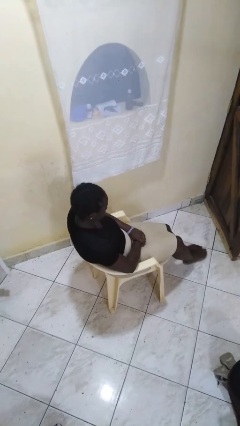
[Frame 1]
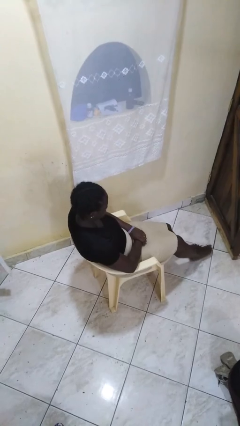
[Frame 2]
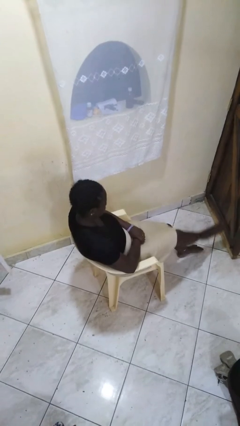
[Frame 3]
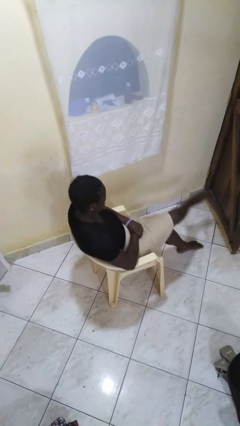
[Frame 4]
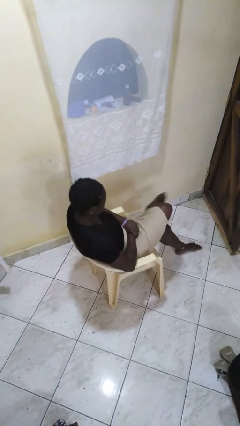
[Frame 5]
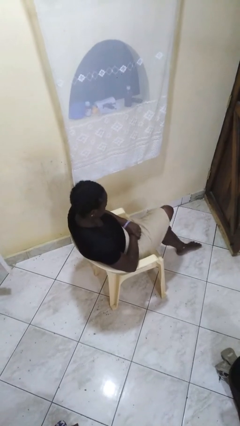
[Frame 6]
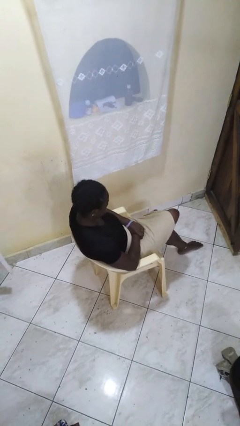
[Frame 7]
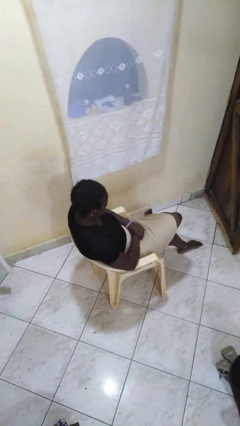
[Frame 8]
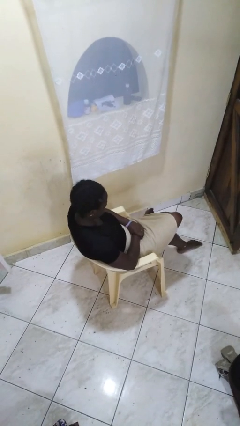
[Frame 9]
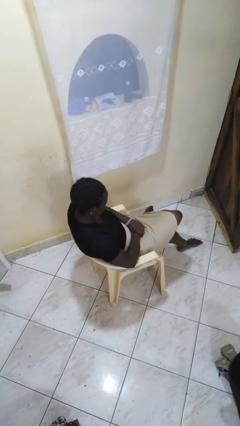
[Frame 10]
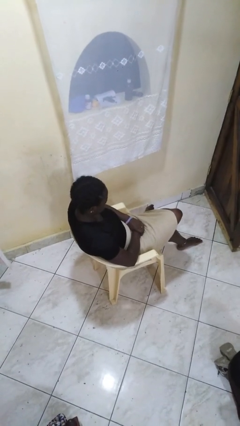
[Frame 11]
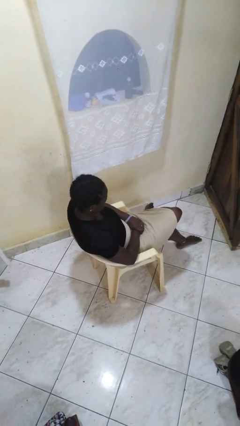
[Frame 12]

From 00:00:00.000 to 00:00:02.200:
person crosses legs

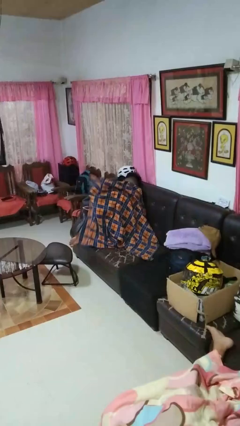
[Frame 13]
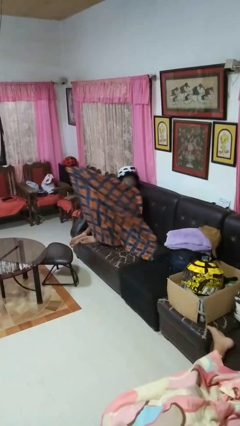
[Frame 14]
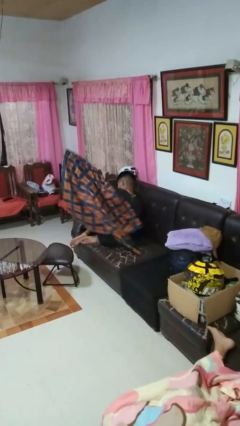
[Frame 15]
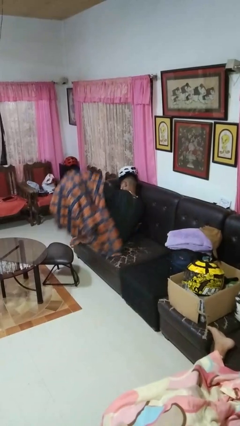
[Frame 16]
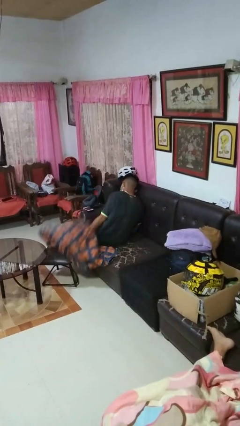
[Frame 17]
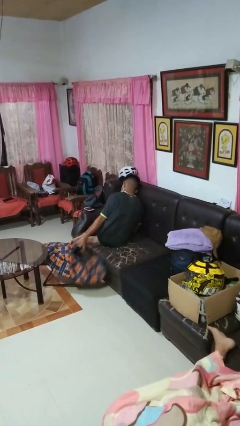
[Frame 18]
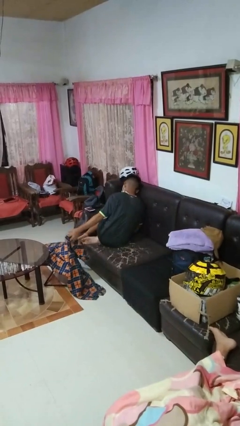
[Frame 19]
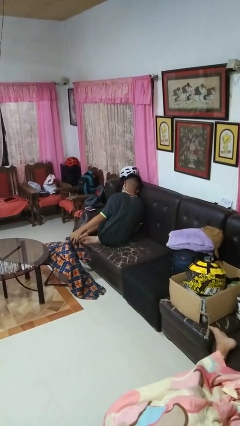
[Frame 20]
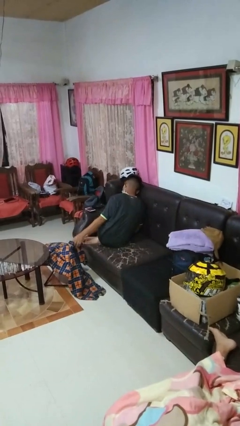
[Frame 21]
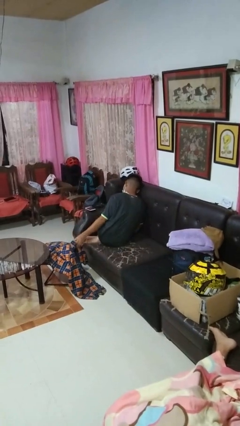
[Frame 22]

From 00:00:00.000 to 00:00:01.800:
person uncovers with blanket

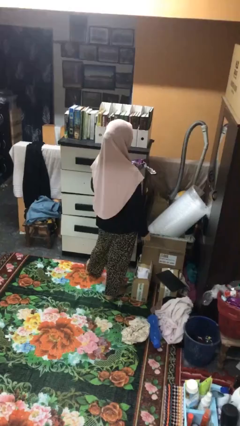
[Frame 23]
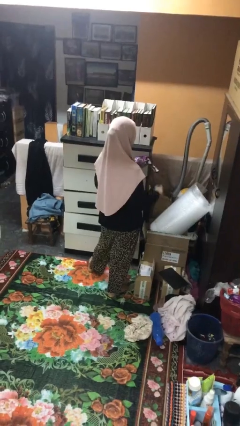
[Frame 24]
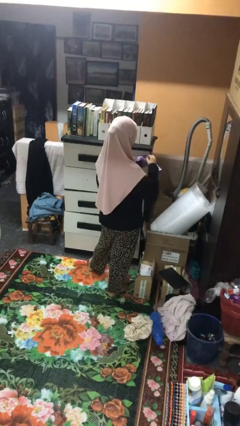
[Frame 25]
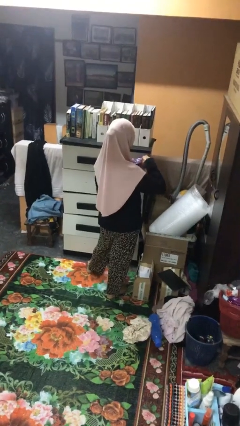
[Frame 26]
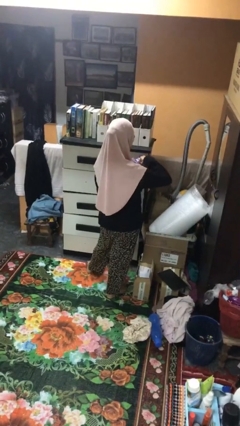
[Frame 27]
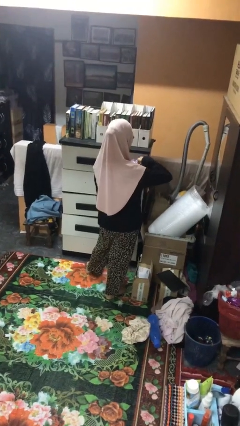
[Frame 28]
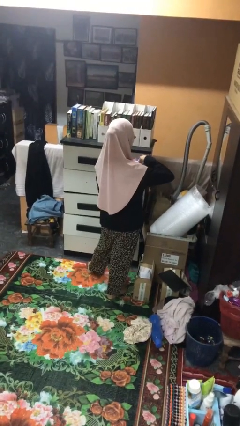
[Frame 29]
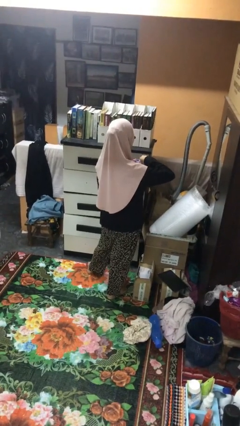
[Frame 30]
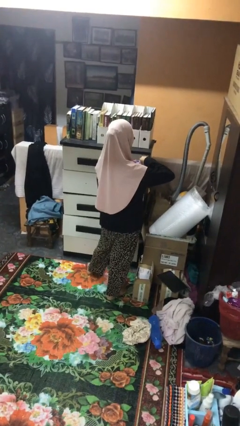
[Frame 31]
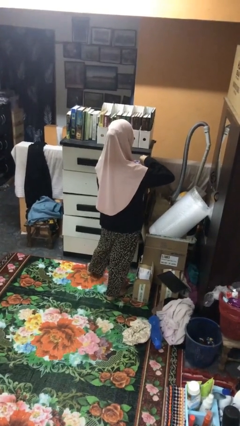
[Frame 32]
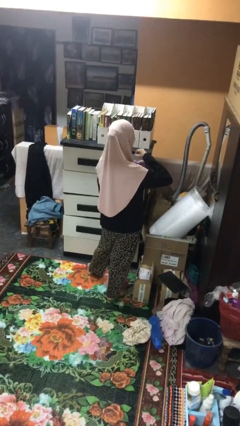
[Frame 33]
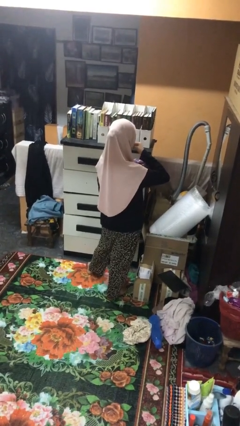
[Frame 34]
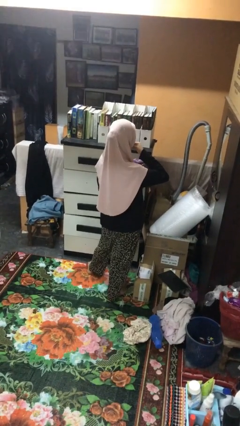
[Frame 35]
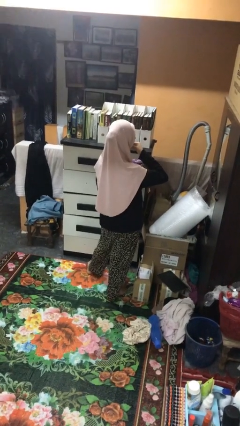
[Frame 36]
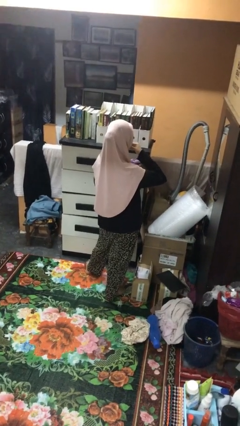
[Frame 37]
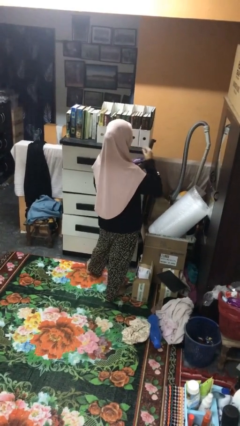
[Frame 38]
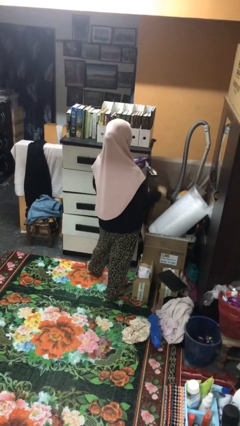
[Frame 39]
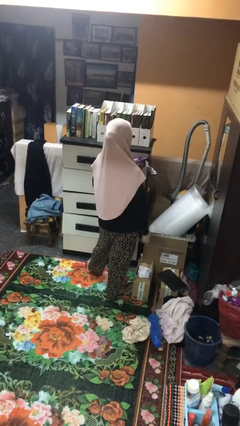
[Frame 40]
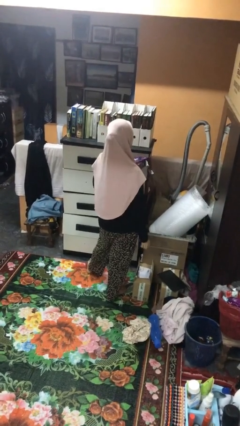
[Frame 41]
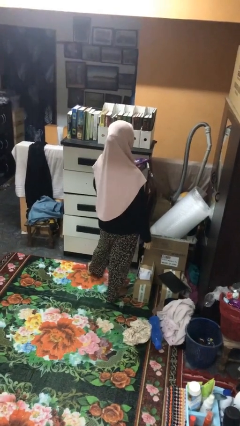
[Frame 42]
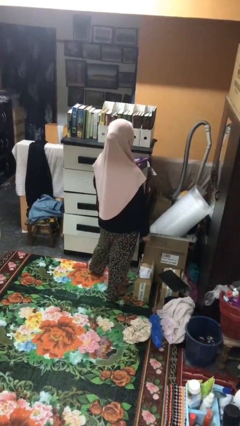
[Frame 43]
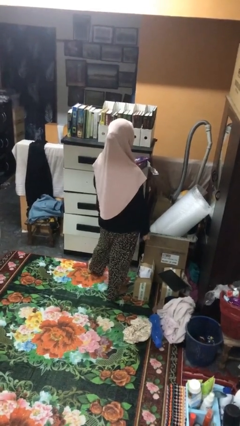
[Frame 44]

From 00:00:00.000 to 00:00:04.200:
person eats snack from bag

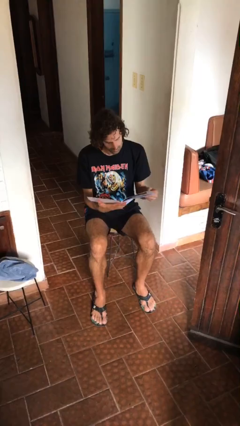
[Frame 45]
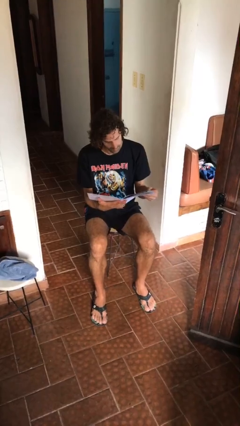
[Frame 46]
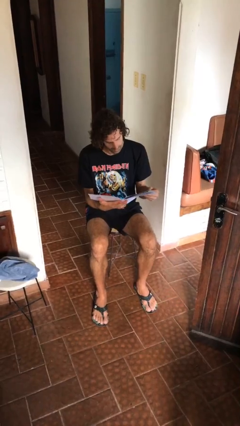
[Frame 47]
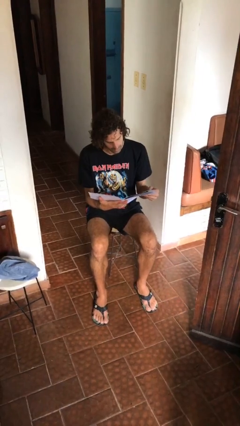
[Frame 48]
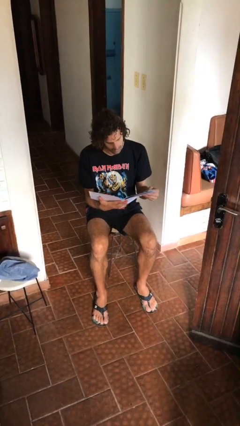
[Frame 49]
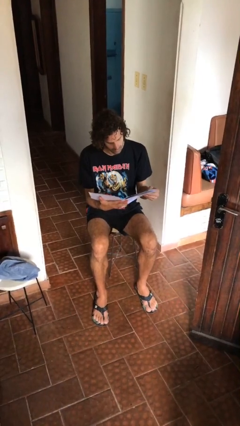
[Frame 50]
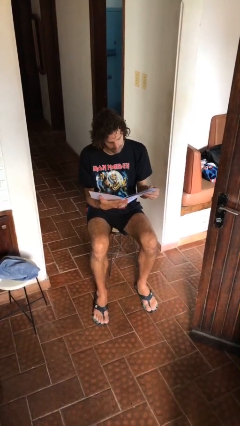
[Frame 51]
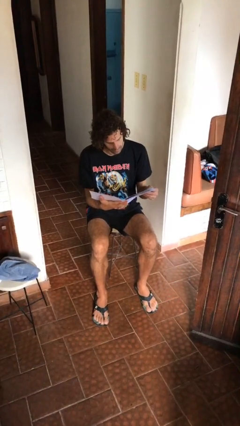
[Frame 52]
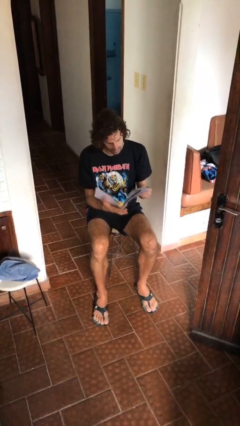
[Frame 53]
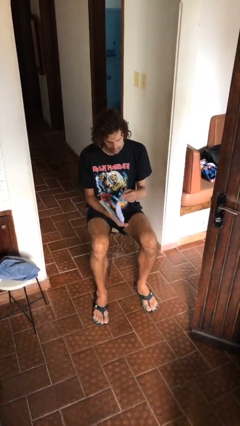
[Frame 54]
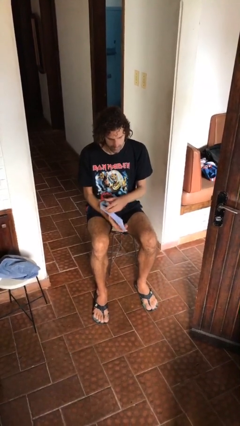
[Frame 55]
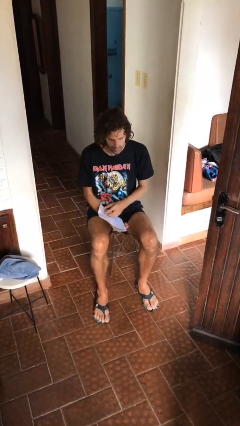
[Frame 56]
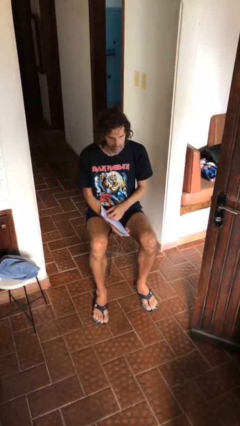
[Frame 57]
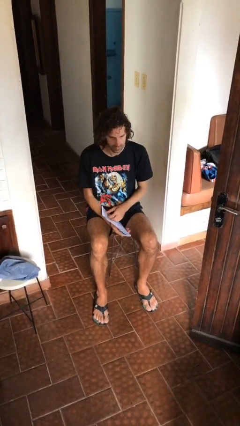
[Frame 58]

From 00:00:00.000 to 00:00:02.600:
person reads document

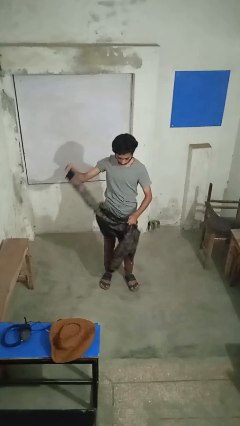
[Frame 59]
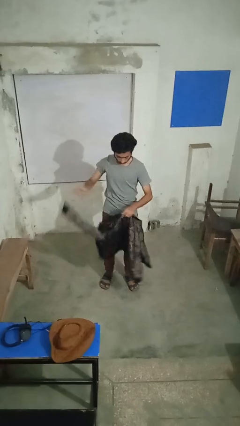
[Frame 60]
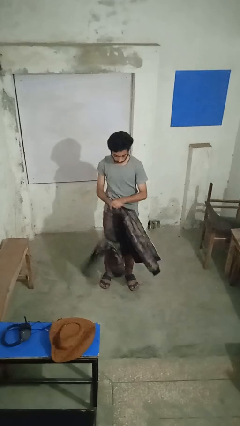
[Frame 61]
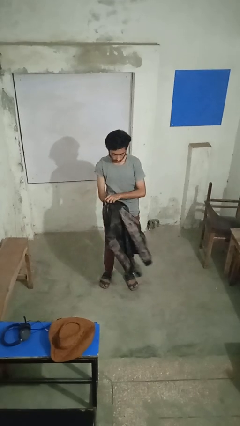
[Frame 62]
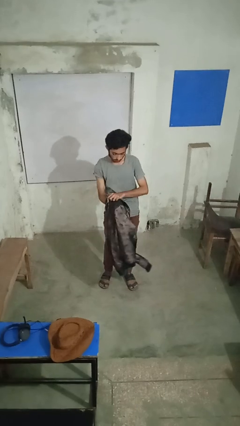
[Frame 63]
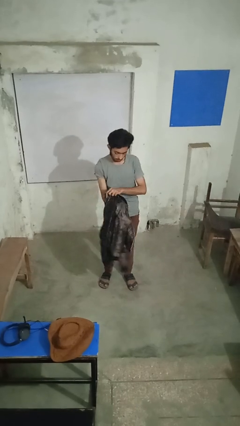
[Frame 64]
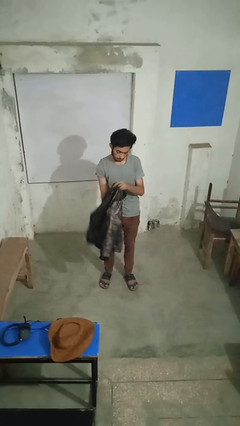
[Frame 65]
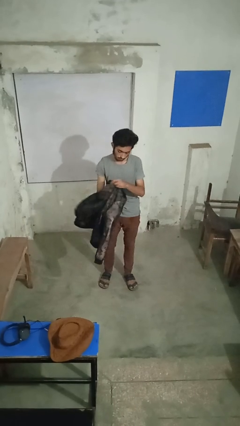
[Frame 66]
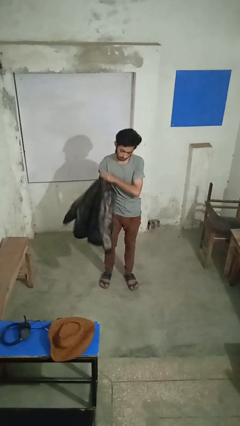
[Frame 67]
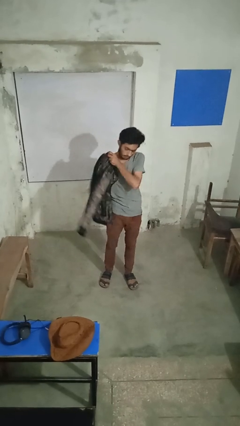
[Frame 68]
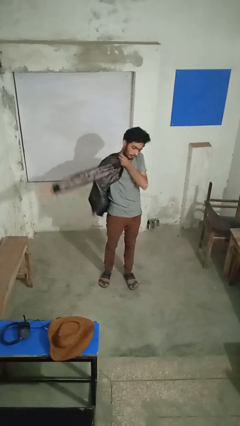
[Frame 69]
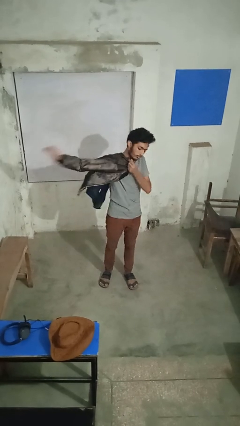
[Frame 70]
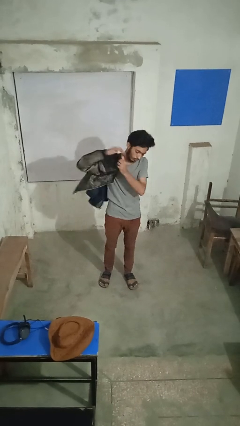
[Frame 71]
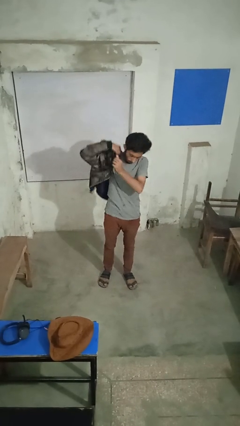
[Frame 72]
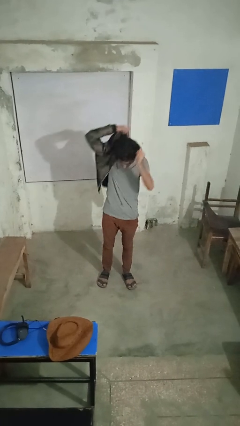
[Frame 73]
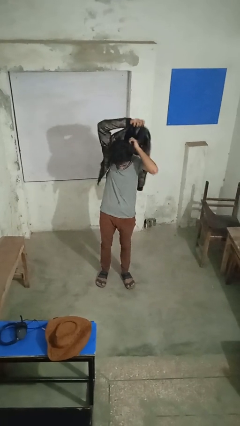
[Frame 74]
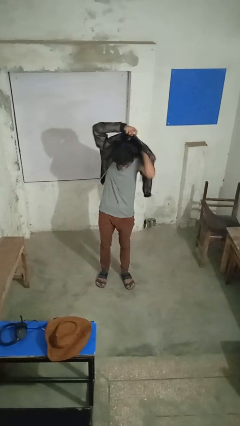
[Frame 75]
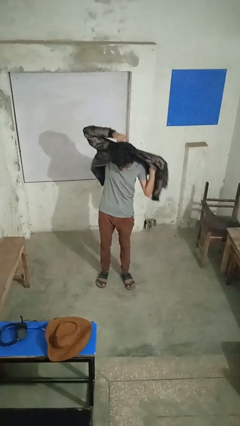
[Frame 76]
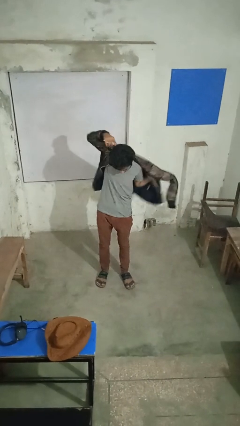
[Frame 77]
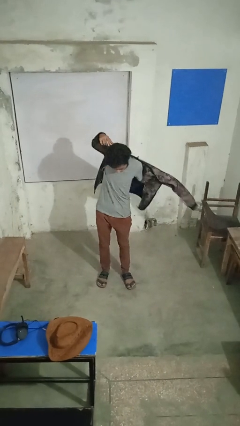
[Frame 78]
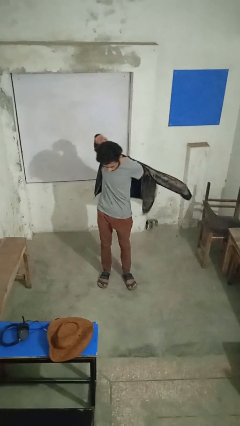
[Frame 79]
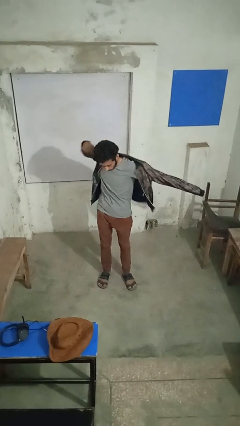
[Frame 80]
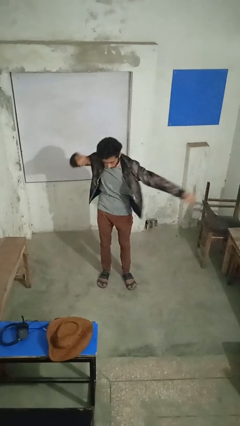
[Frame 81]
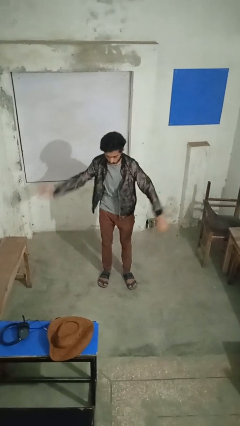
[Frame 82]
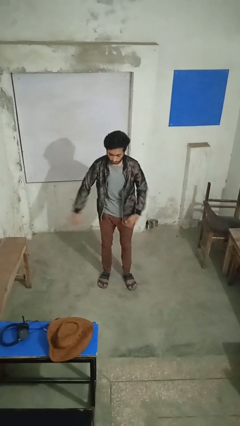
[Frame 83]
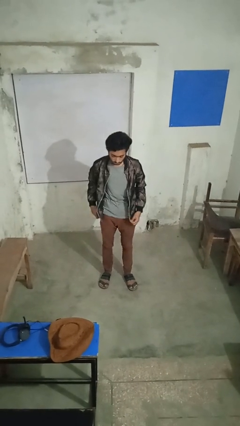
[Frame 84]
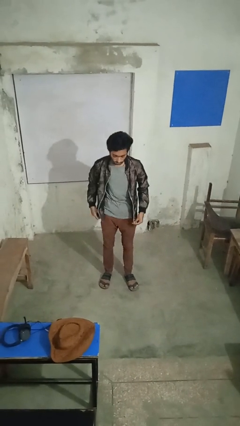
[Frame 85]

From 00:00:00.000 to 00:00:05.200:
person puts on jacket

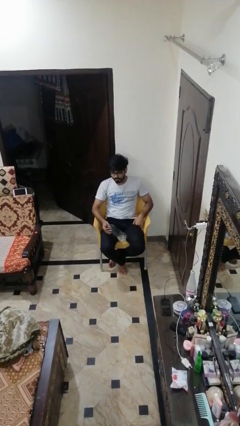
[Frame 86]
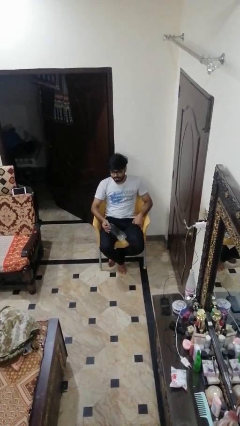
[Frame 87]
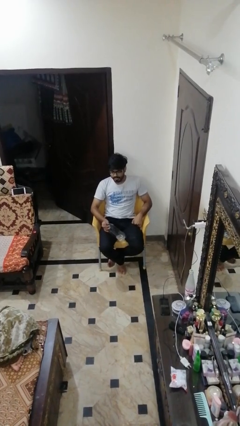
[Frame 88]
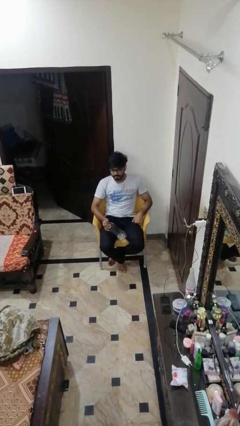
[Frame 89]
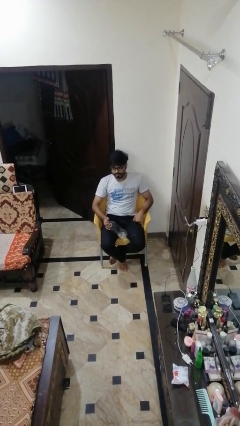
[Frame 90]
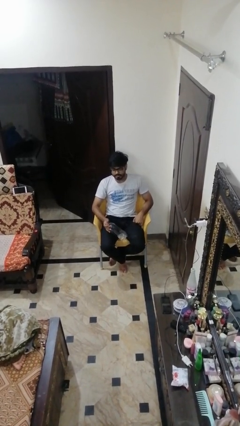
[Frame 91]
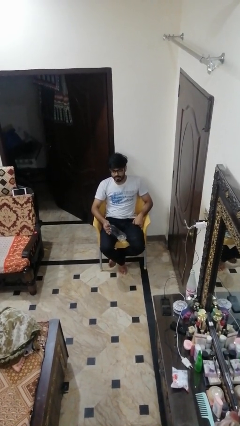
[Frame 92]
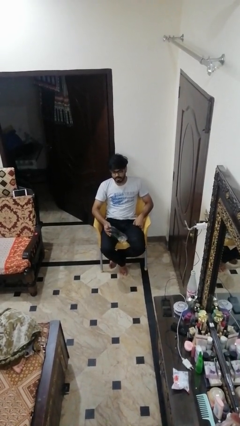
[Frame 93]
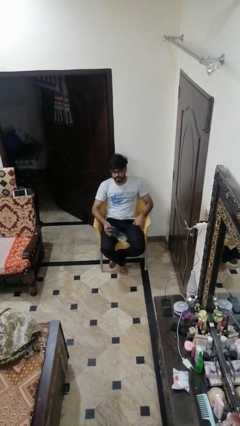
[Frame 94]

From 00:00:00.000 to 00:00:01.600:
person drops object
